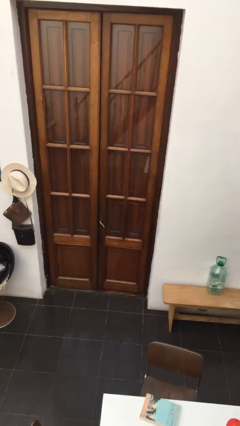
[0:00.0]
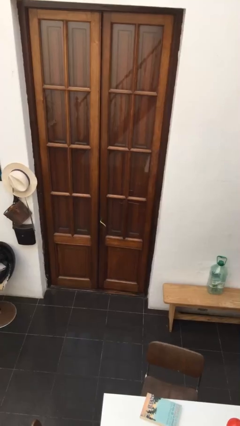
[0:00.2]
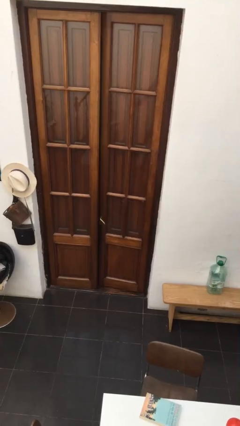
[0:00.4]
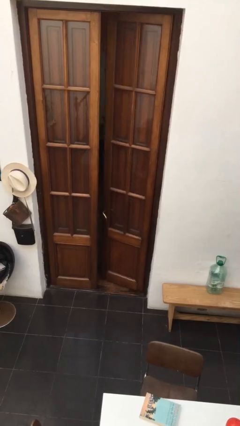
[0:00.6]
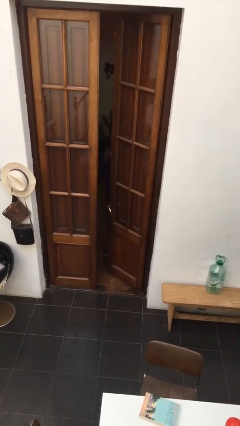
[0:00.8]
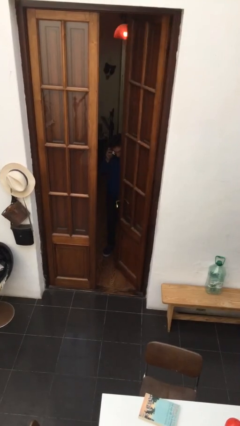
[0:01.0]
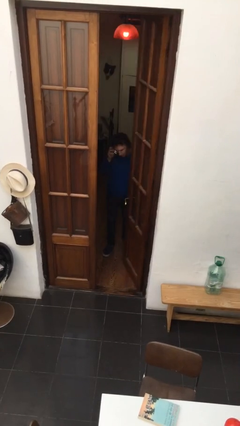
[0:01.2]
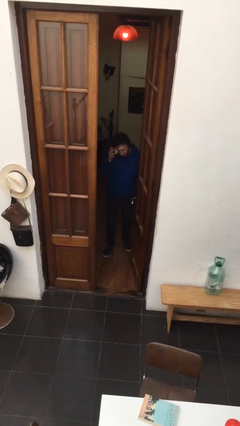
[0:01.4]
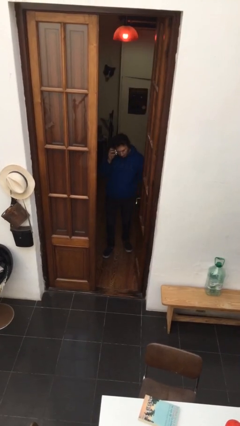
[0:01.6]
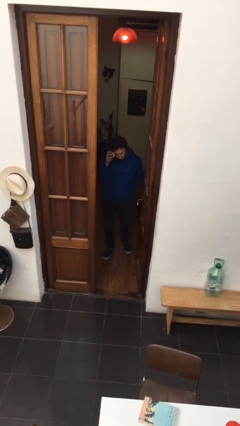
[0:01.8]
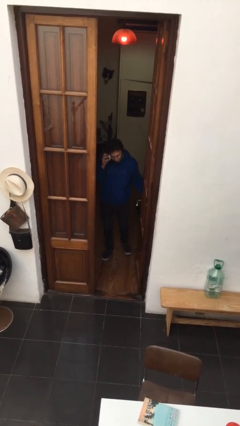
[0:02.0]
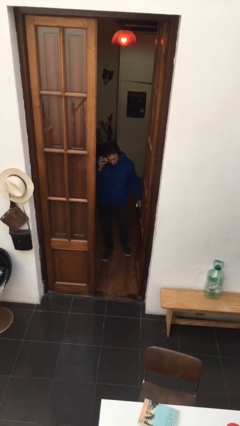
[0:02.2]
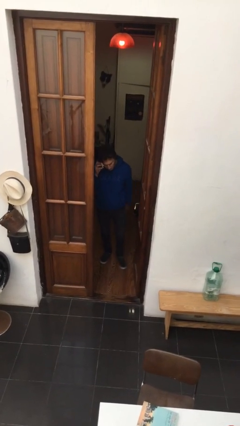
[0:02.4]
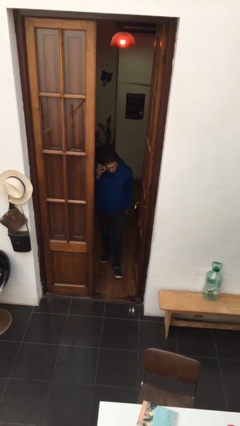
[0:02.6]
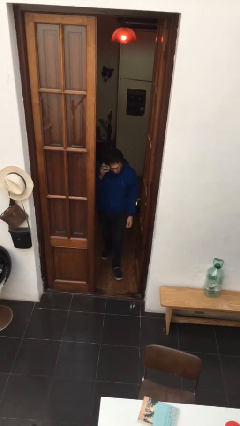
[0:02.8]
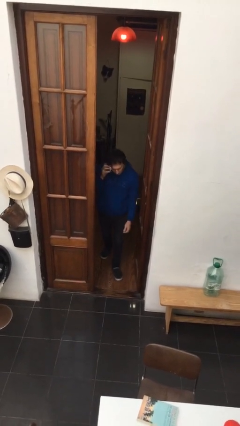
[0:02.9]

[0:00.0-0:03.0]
person opens facility door

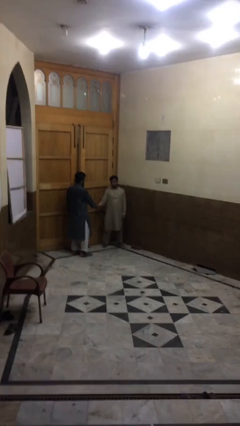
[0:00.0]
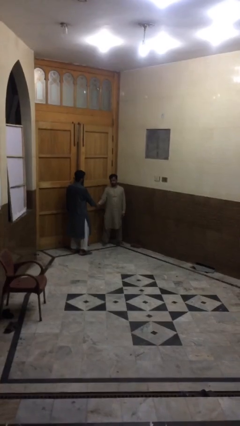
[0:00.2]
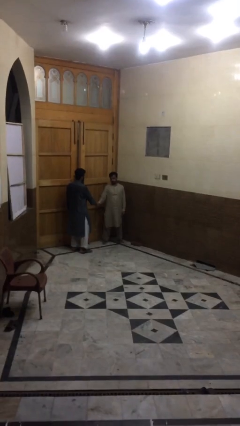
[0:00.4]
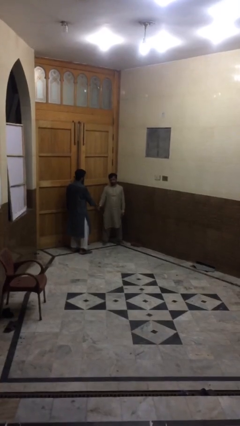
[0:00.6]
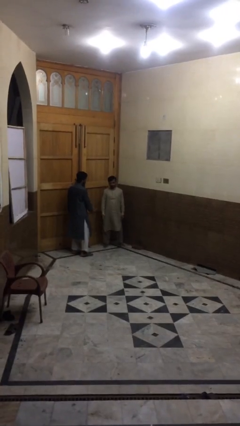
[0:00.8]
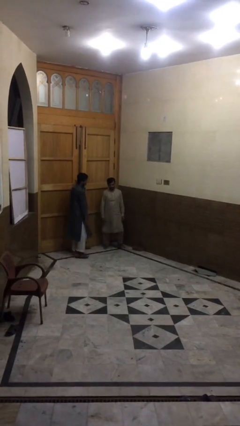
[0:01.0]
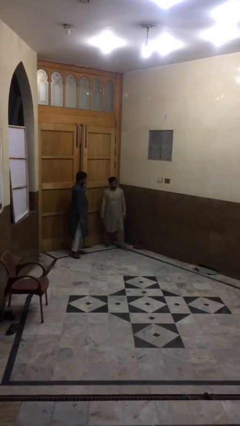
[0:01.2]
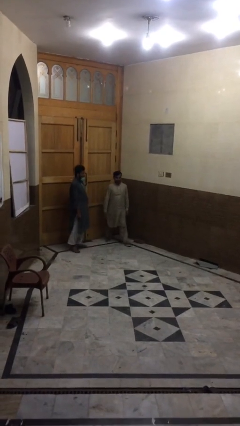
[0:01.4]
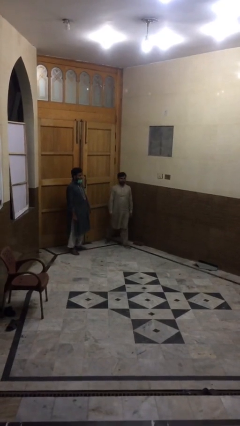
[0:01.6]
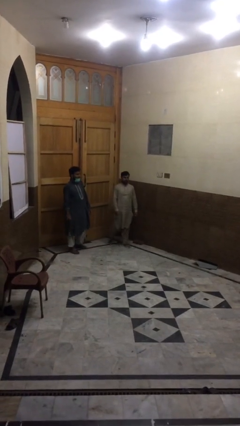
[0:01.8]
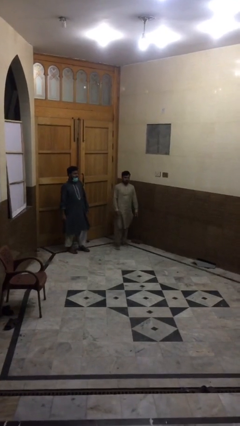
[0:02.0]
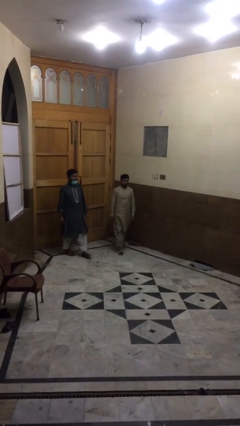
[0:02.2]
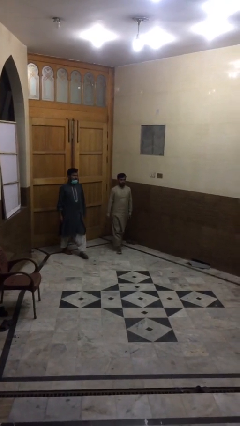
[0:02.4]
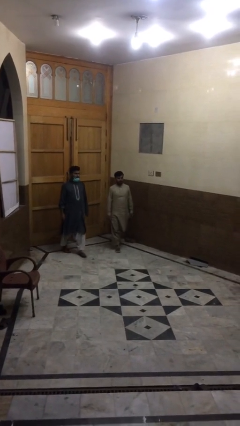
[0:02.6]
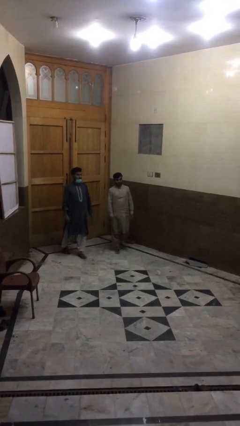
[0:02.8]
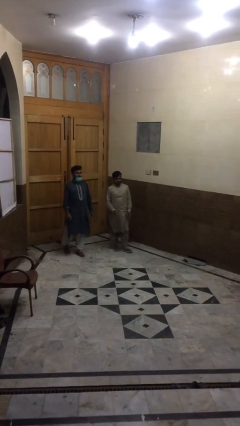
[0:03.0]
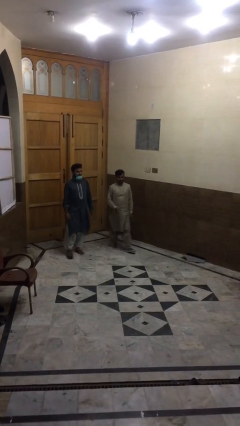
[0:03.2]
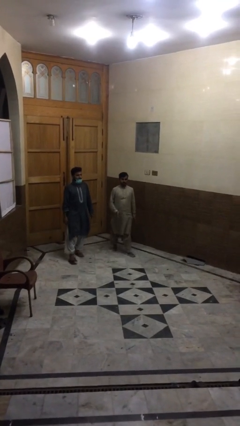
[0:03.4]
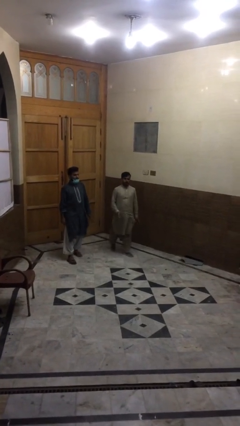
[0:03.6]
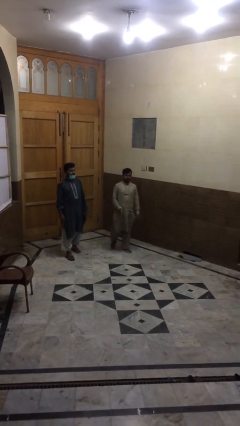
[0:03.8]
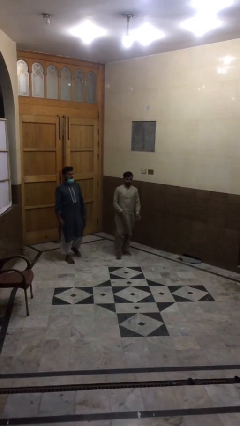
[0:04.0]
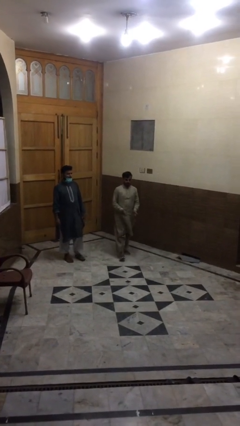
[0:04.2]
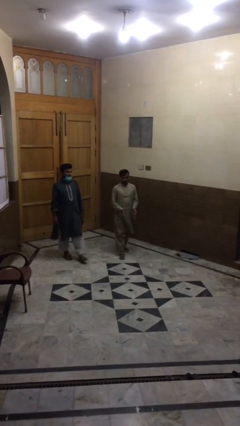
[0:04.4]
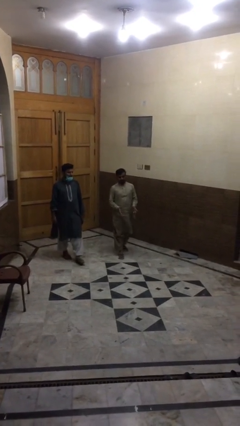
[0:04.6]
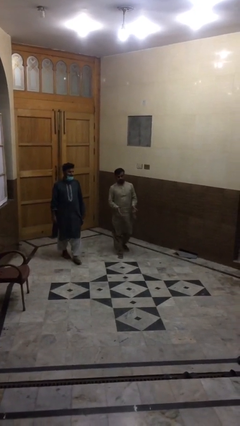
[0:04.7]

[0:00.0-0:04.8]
person talks to person

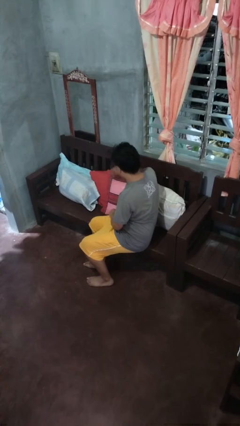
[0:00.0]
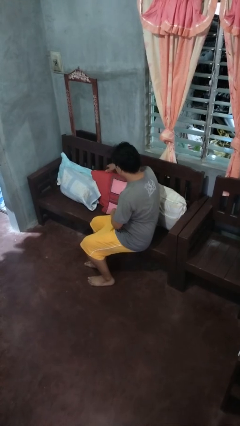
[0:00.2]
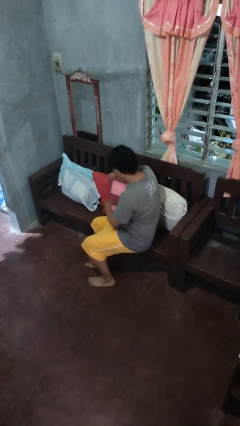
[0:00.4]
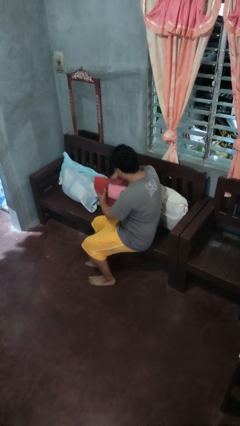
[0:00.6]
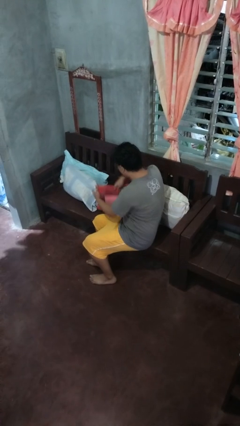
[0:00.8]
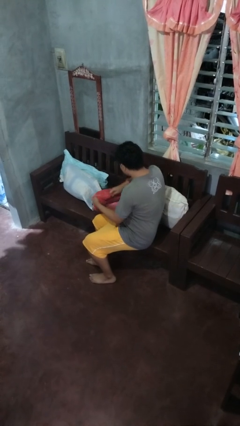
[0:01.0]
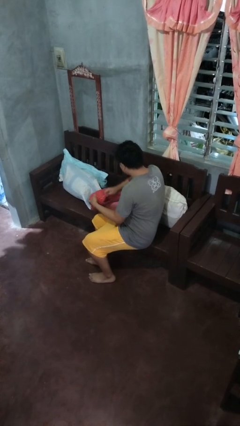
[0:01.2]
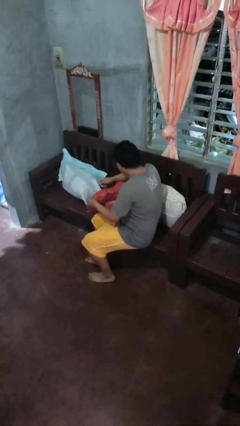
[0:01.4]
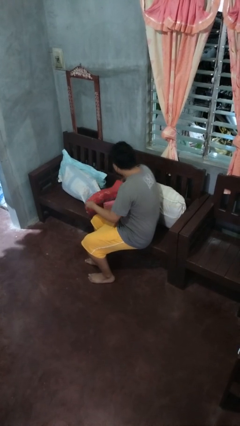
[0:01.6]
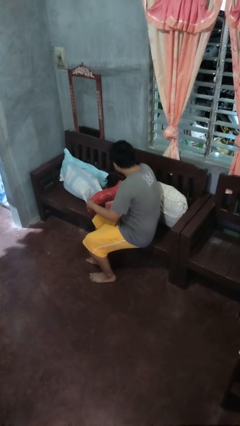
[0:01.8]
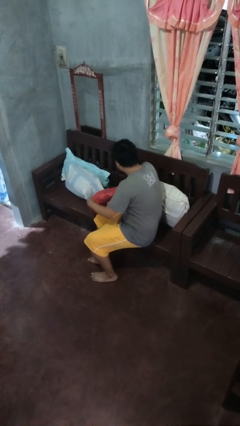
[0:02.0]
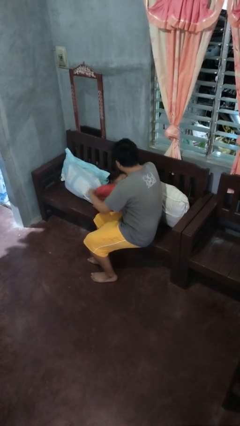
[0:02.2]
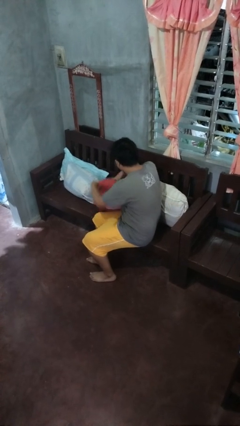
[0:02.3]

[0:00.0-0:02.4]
person searches in couch

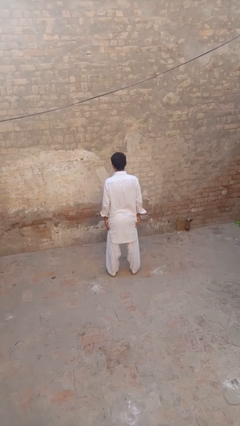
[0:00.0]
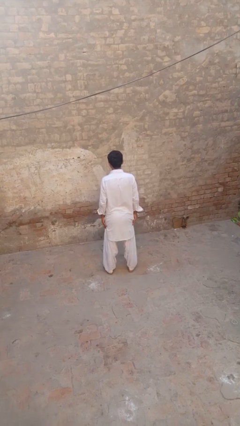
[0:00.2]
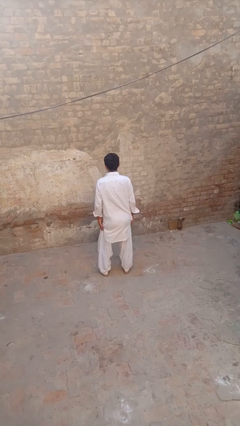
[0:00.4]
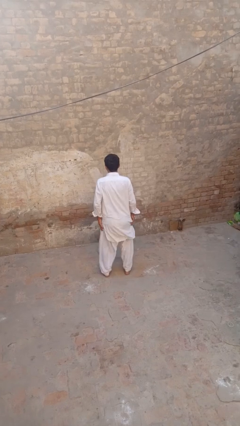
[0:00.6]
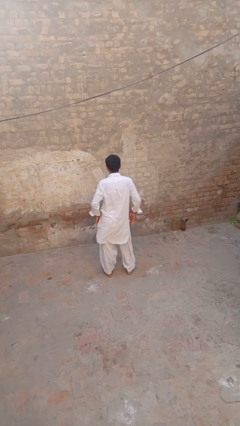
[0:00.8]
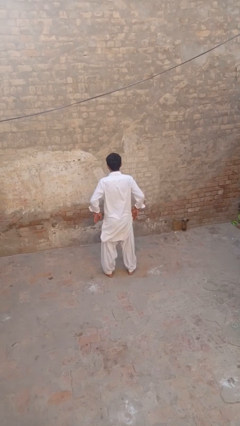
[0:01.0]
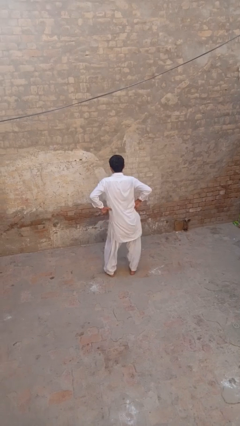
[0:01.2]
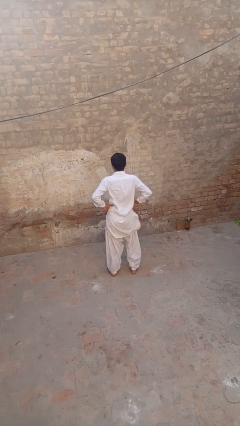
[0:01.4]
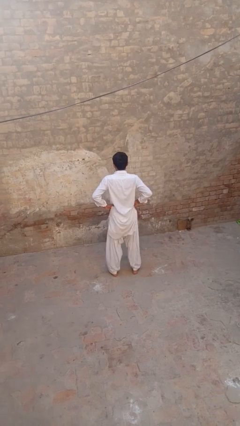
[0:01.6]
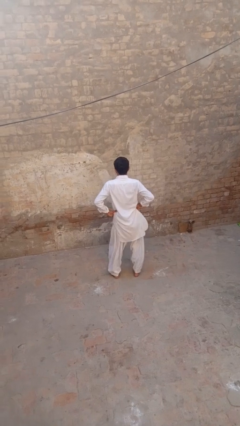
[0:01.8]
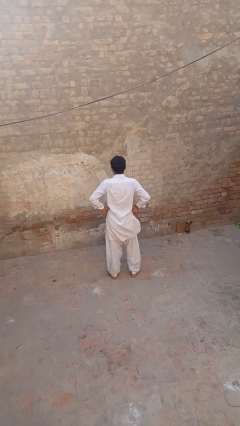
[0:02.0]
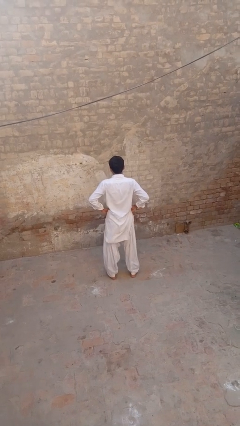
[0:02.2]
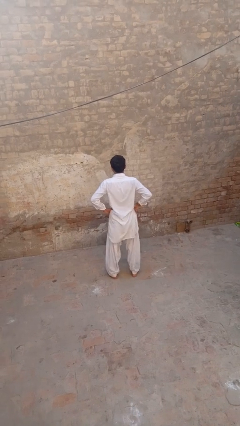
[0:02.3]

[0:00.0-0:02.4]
person wiggles hips

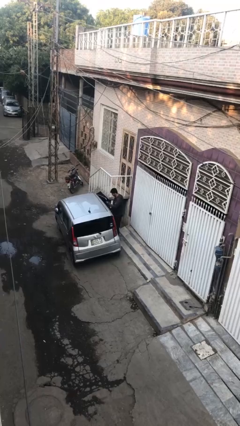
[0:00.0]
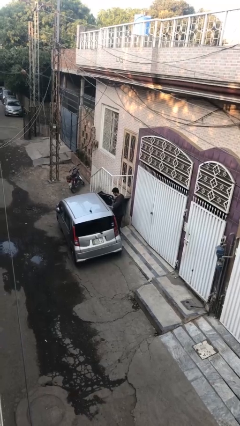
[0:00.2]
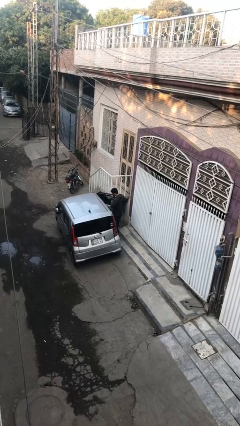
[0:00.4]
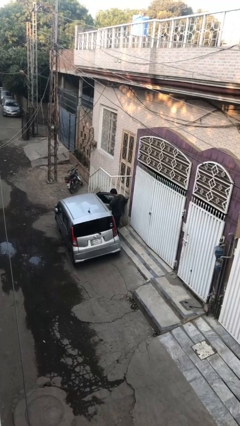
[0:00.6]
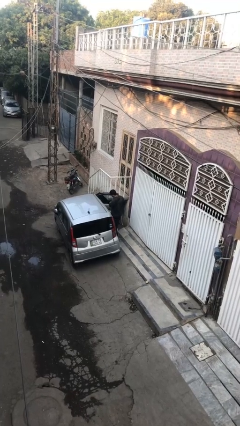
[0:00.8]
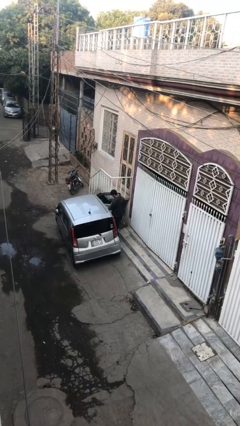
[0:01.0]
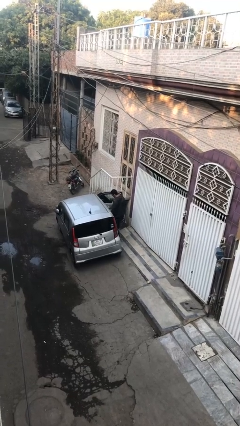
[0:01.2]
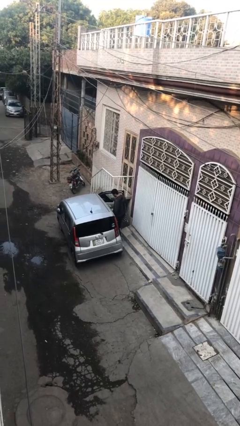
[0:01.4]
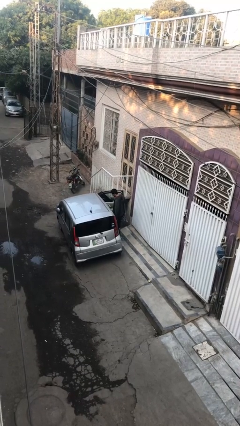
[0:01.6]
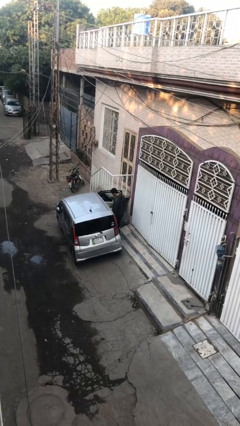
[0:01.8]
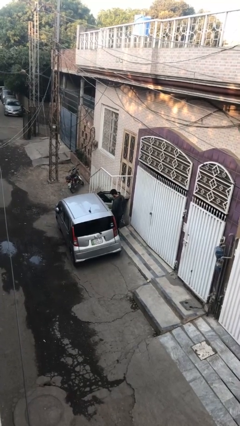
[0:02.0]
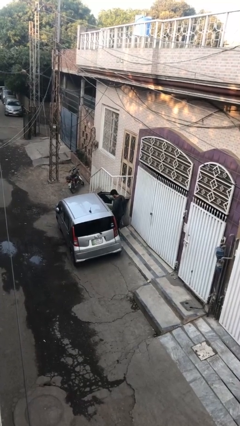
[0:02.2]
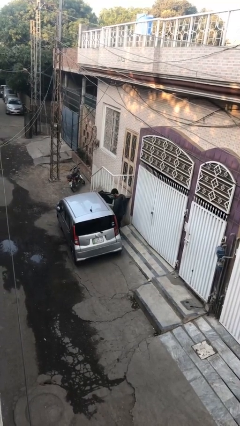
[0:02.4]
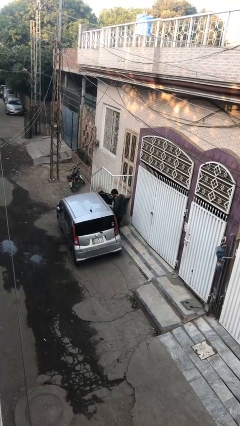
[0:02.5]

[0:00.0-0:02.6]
person opens car door

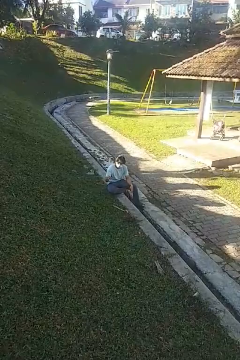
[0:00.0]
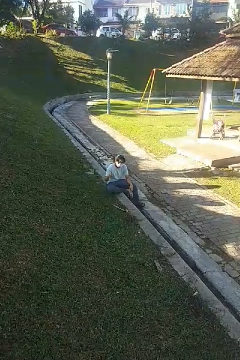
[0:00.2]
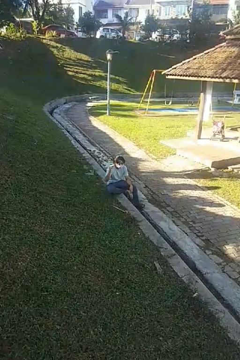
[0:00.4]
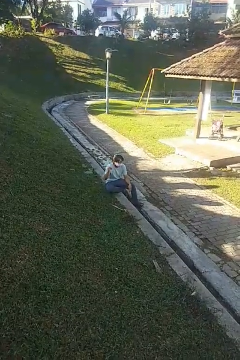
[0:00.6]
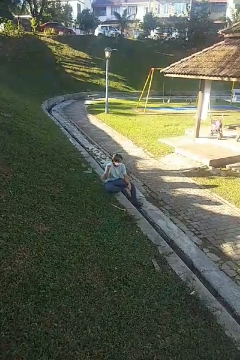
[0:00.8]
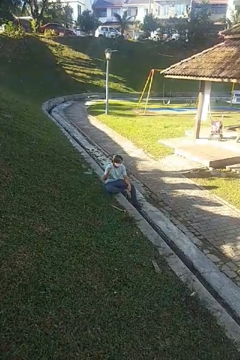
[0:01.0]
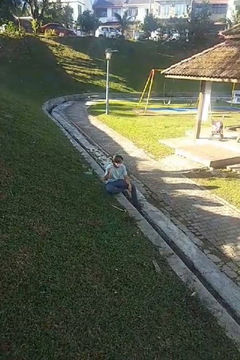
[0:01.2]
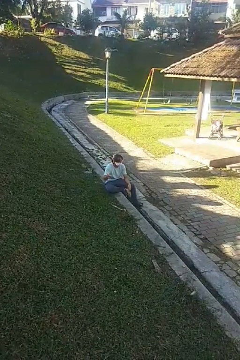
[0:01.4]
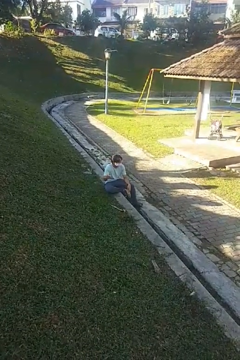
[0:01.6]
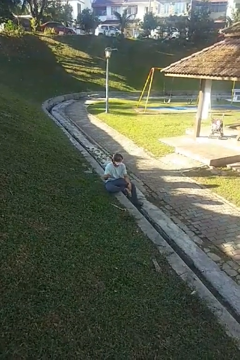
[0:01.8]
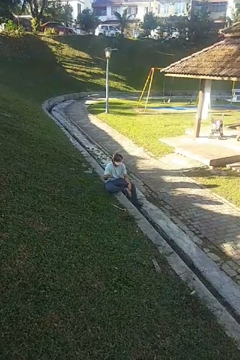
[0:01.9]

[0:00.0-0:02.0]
person snaps fingers

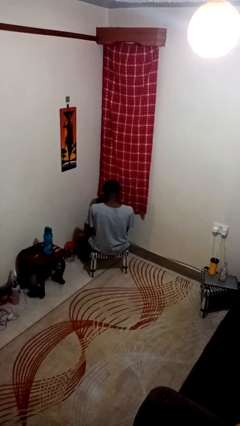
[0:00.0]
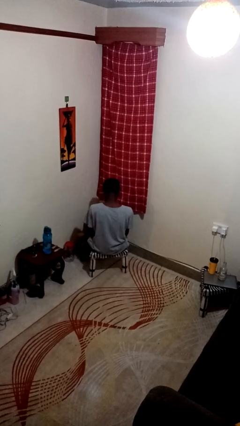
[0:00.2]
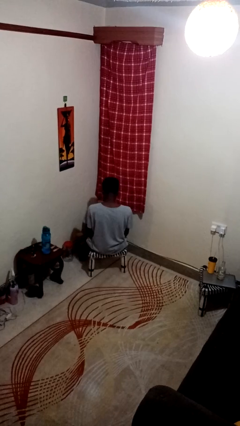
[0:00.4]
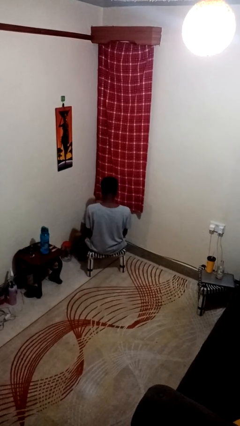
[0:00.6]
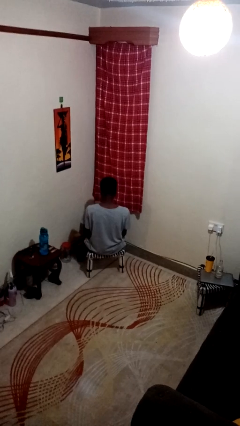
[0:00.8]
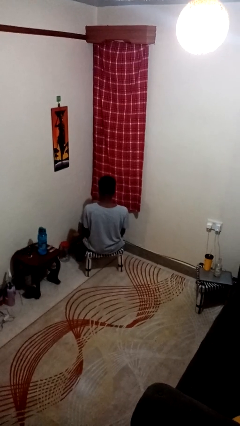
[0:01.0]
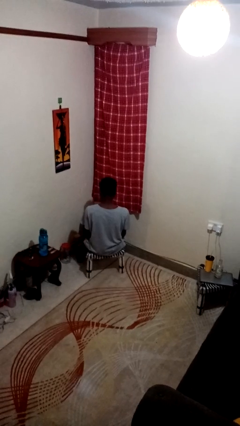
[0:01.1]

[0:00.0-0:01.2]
person takes off scarf
